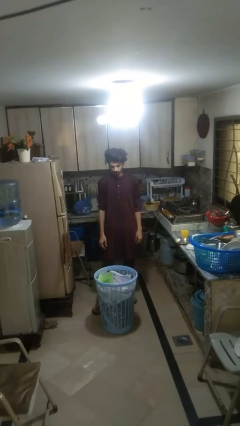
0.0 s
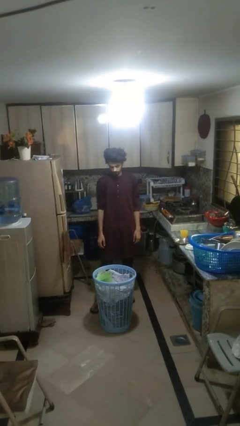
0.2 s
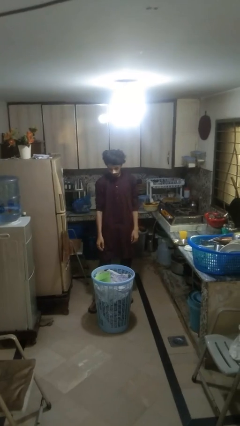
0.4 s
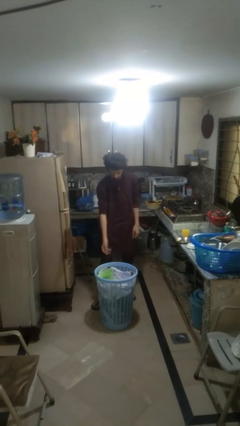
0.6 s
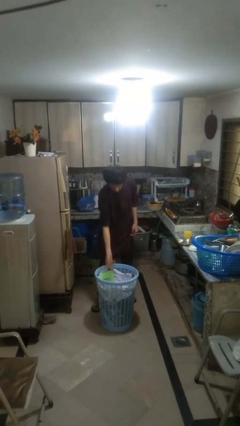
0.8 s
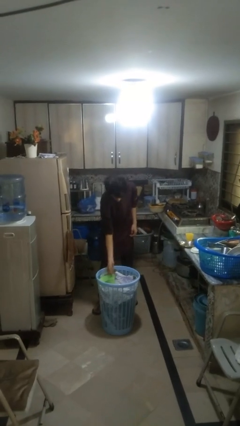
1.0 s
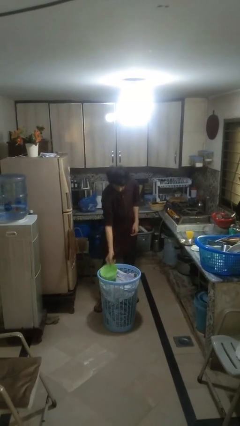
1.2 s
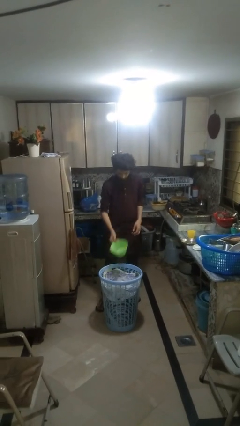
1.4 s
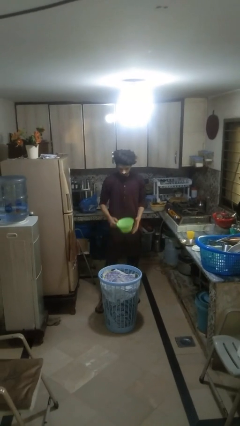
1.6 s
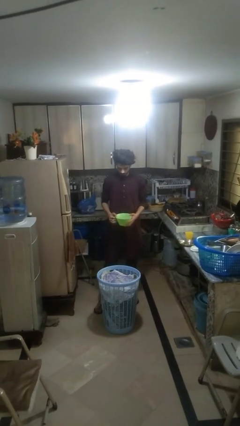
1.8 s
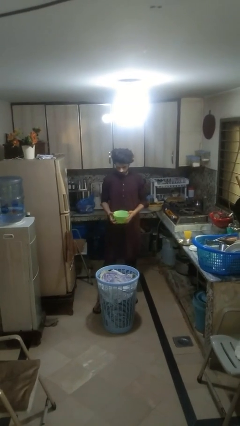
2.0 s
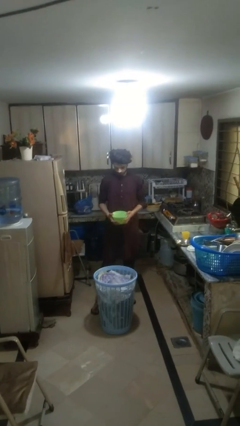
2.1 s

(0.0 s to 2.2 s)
person takes object from basket

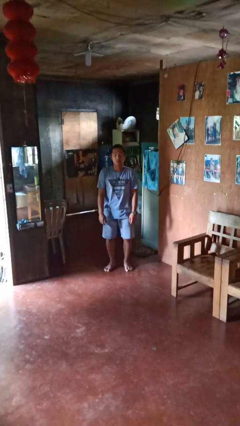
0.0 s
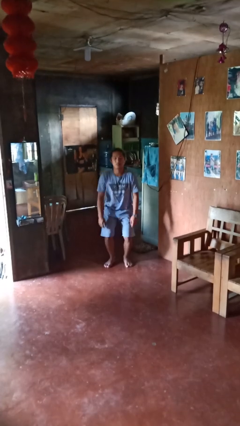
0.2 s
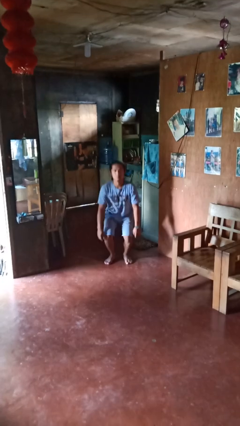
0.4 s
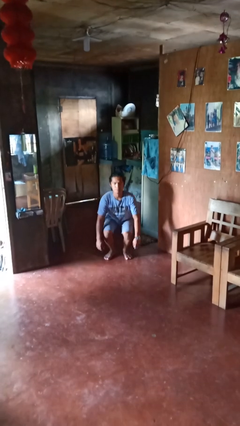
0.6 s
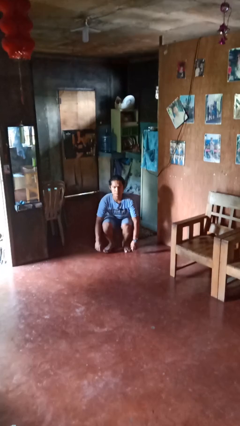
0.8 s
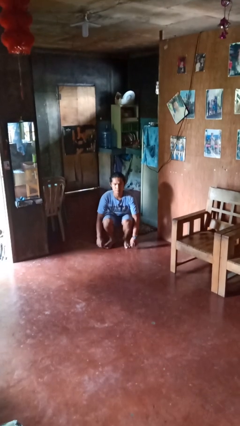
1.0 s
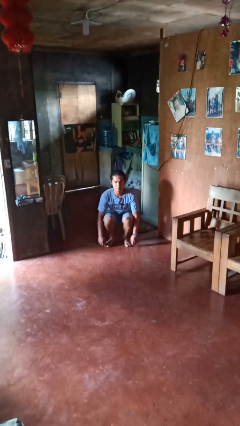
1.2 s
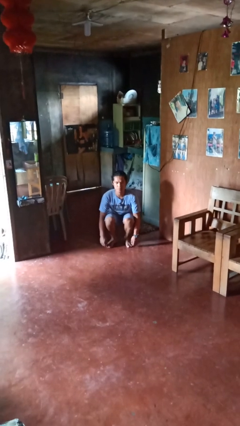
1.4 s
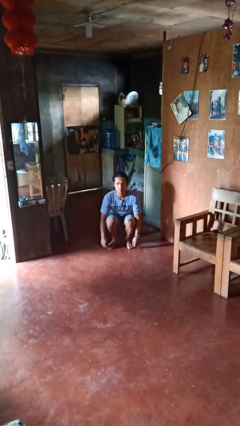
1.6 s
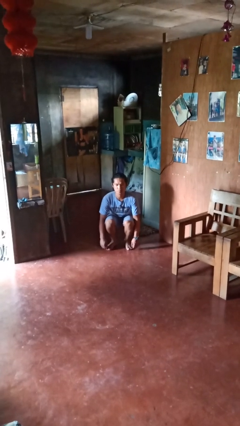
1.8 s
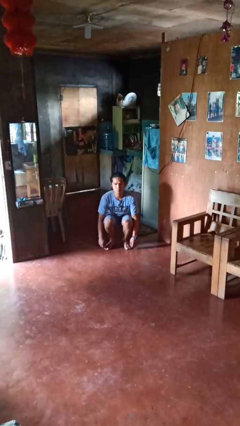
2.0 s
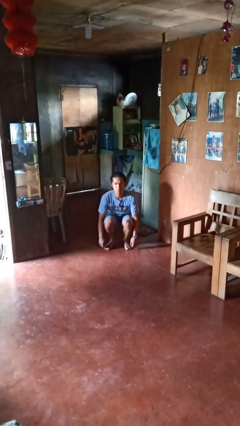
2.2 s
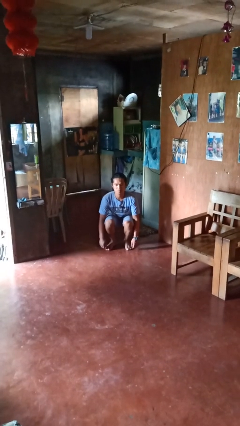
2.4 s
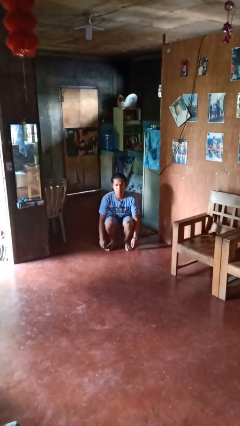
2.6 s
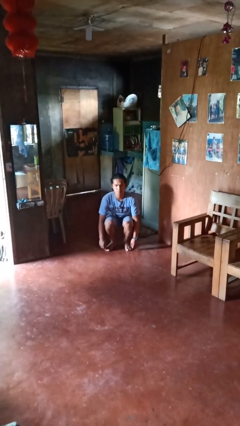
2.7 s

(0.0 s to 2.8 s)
person squats

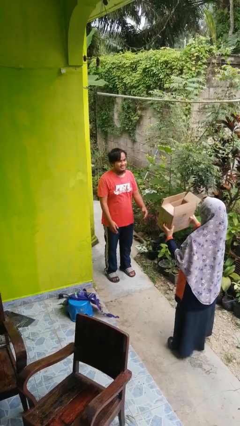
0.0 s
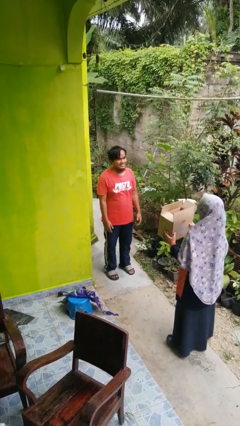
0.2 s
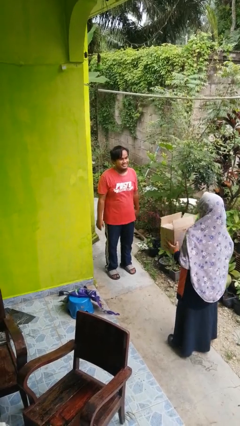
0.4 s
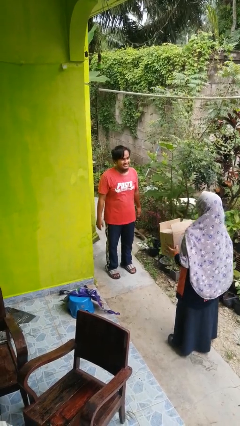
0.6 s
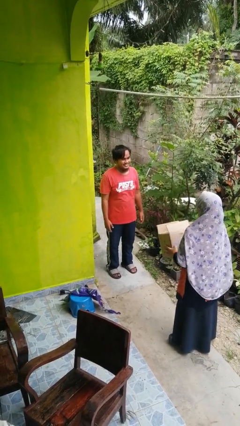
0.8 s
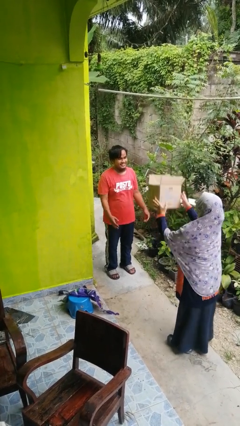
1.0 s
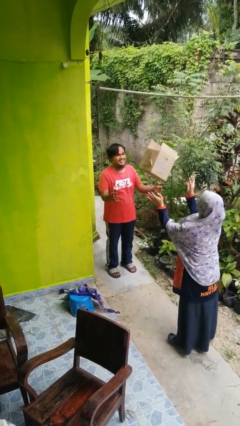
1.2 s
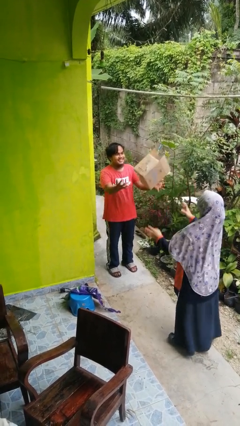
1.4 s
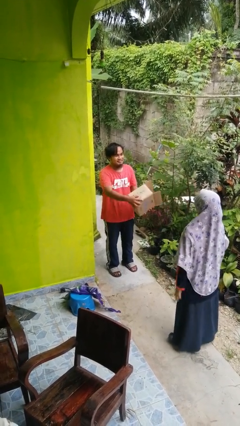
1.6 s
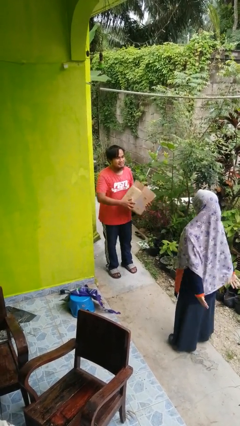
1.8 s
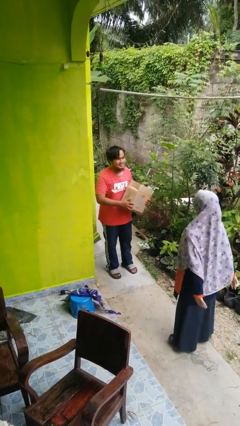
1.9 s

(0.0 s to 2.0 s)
person catches object from person

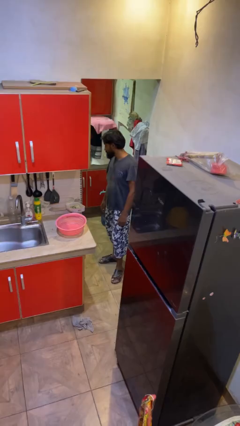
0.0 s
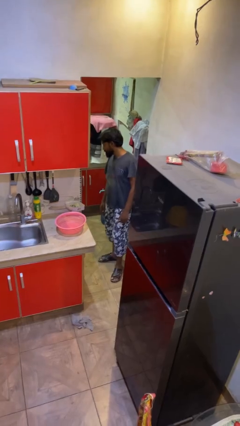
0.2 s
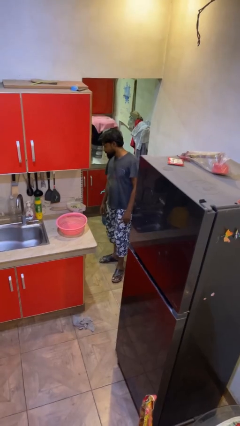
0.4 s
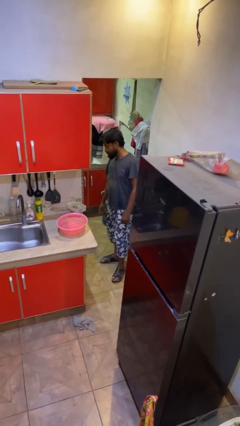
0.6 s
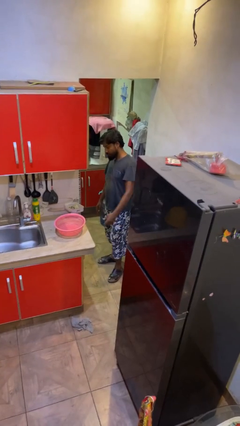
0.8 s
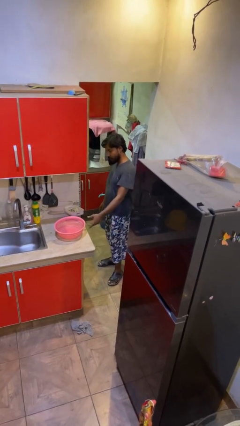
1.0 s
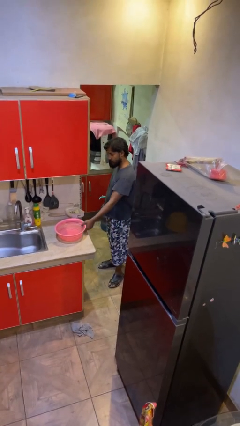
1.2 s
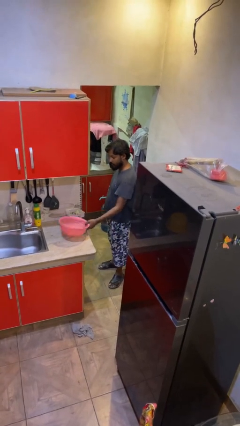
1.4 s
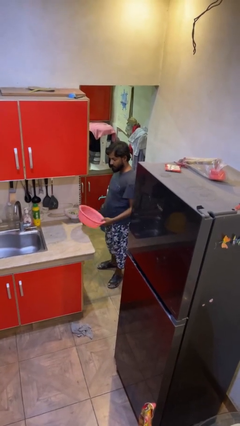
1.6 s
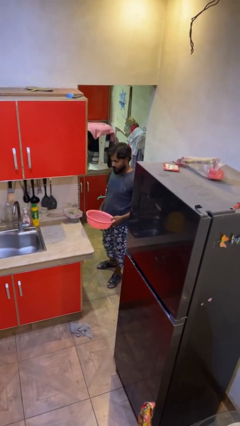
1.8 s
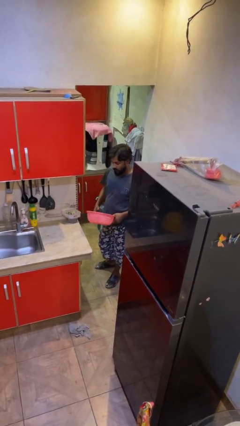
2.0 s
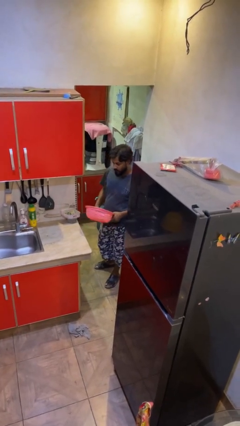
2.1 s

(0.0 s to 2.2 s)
person picks up object from countertop

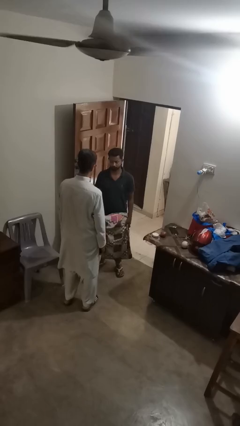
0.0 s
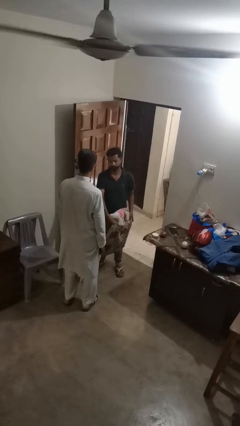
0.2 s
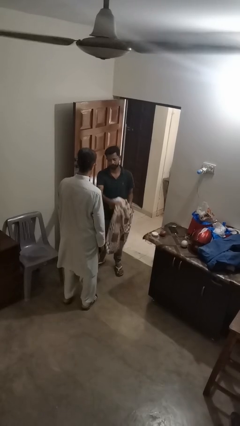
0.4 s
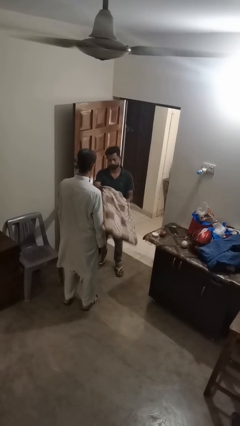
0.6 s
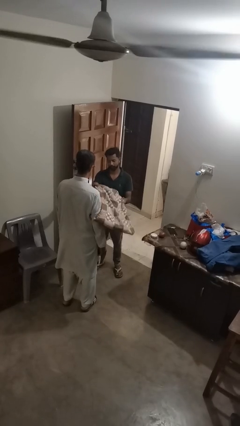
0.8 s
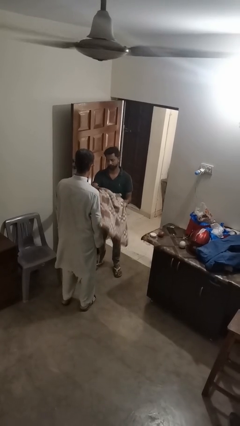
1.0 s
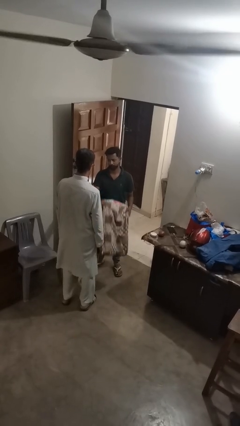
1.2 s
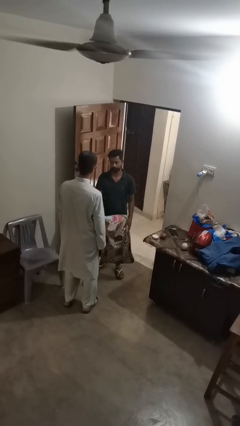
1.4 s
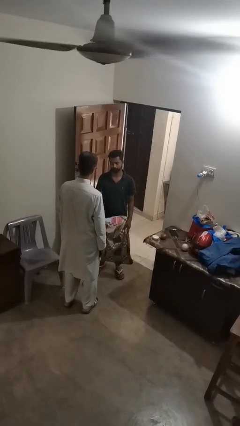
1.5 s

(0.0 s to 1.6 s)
person hits person with pillow

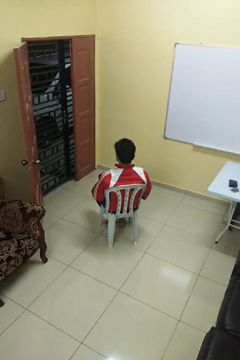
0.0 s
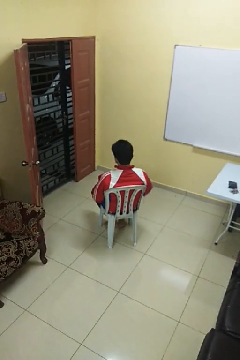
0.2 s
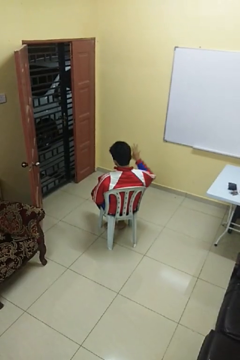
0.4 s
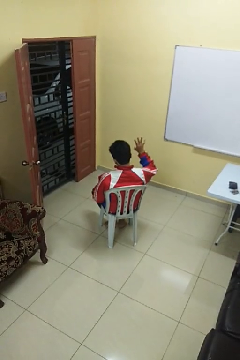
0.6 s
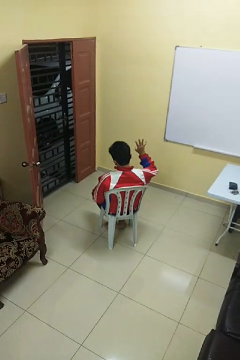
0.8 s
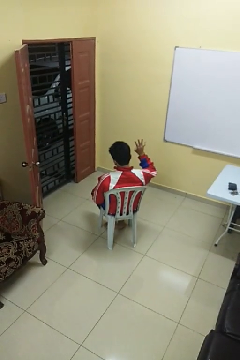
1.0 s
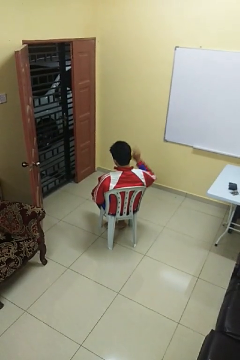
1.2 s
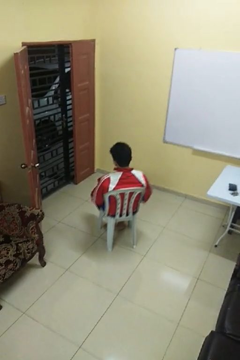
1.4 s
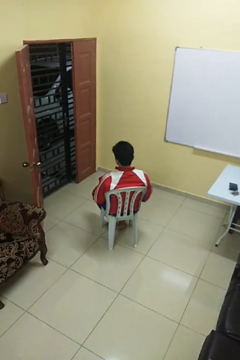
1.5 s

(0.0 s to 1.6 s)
person gestures number four

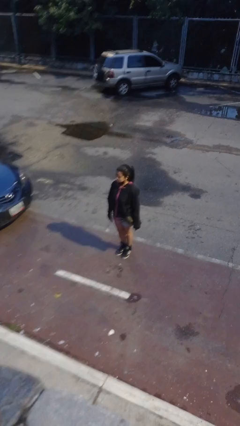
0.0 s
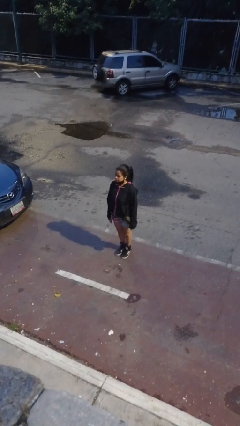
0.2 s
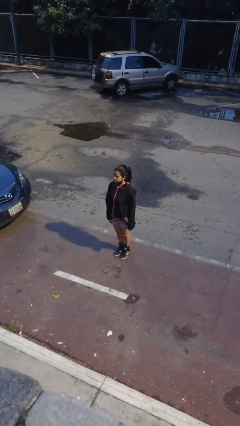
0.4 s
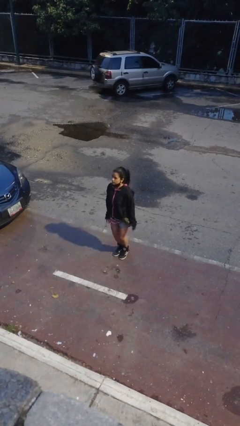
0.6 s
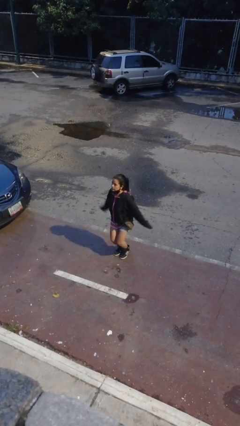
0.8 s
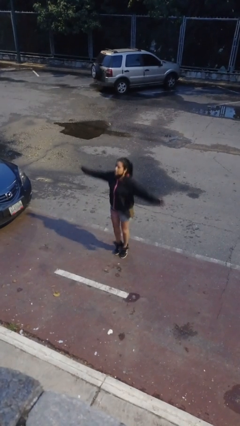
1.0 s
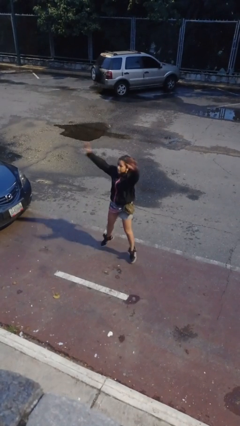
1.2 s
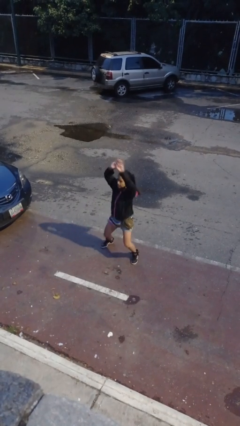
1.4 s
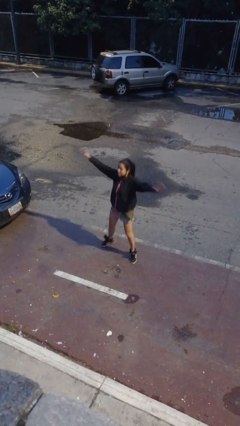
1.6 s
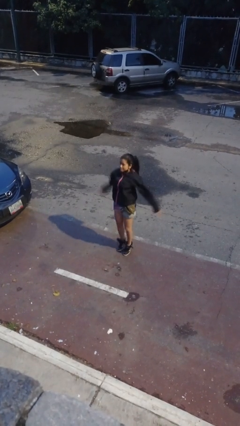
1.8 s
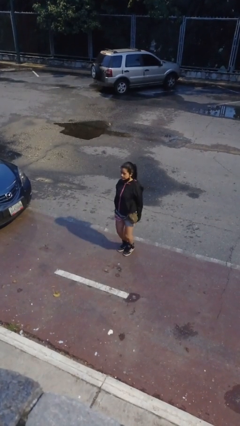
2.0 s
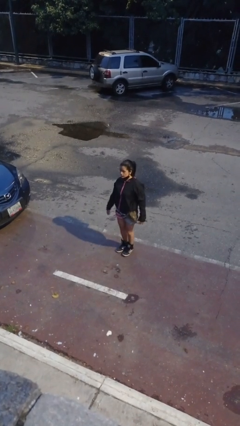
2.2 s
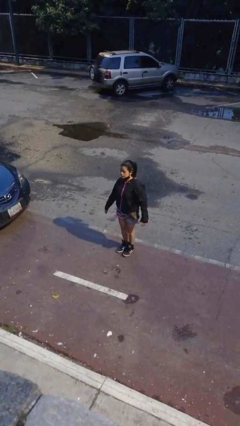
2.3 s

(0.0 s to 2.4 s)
person exercises with jumping jacks

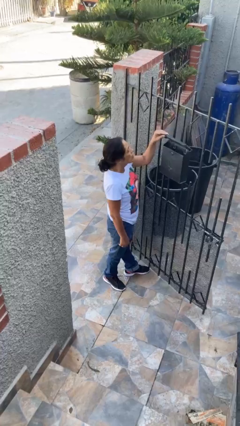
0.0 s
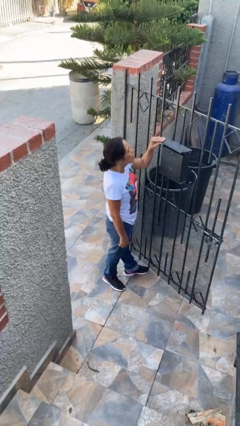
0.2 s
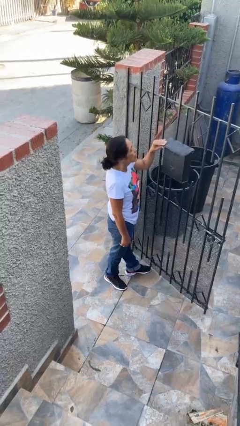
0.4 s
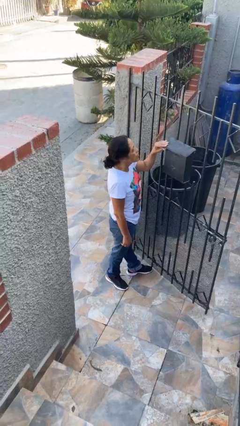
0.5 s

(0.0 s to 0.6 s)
person closes mailbox

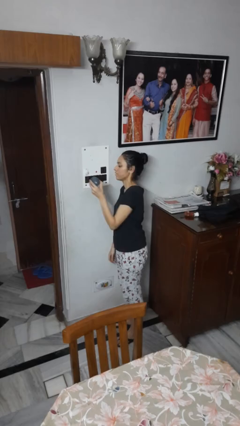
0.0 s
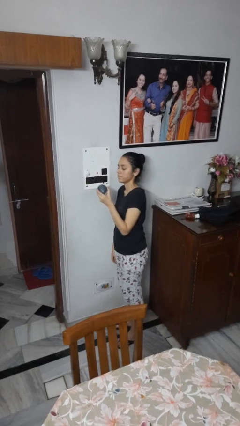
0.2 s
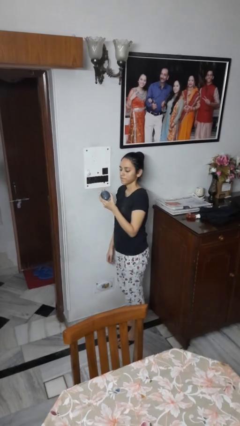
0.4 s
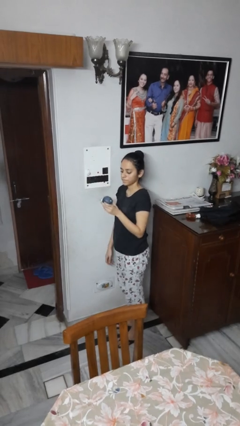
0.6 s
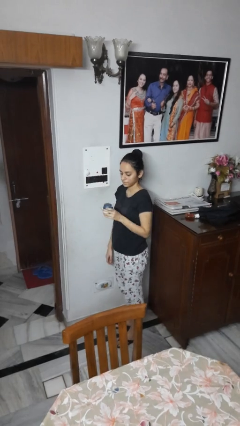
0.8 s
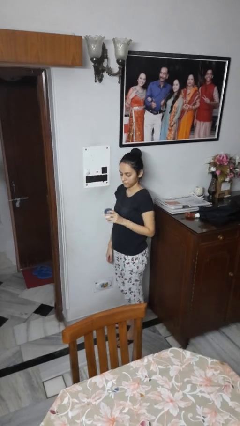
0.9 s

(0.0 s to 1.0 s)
person unplugs from electrical socket

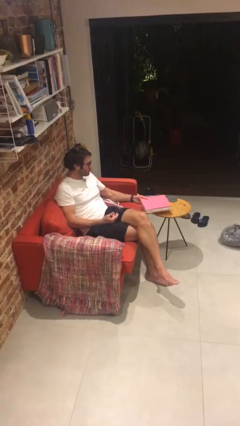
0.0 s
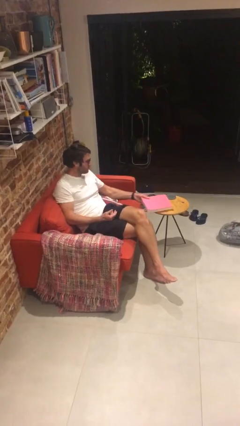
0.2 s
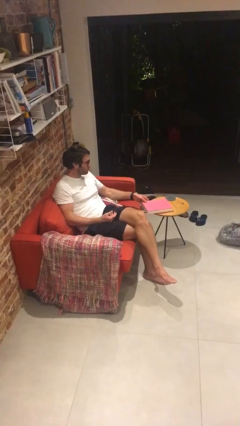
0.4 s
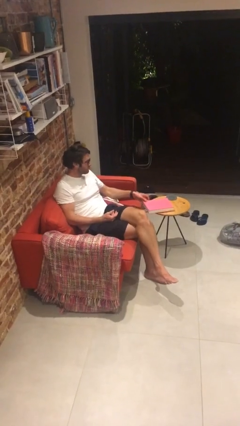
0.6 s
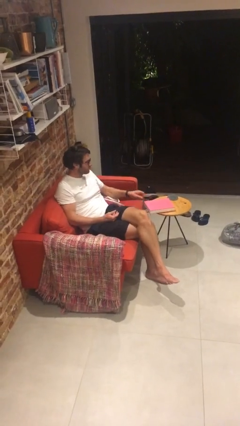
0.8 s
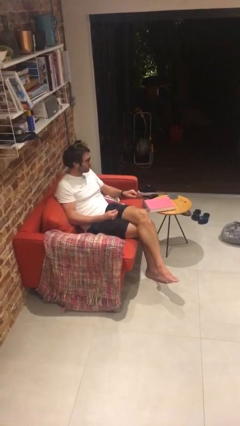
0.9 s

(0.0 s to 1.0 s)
person puts down object on table
